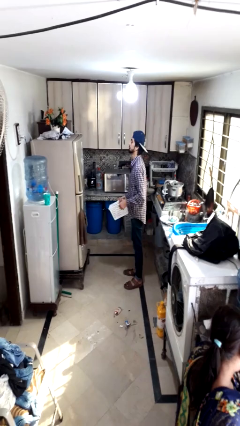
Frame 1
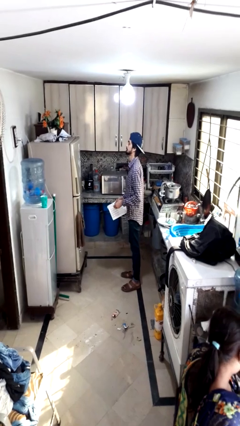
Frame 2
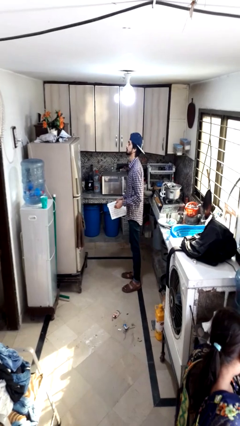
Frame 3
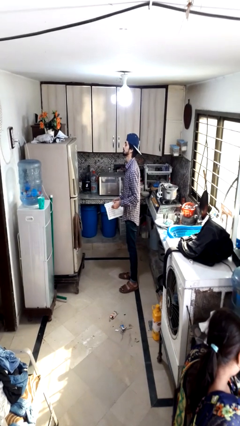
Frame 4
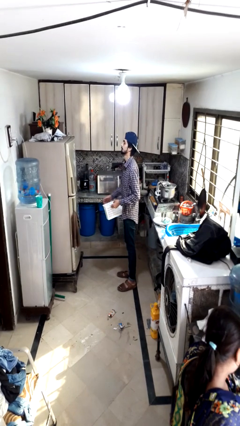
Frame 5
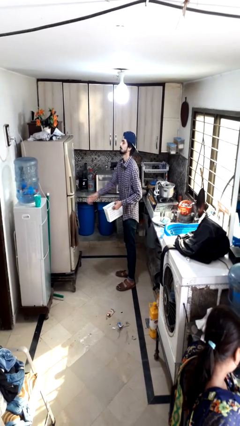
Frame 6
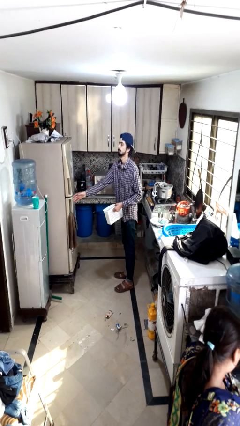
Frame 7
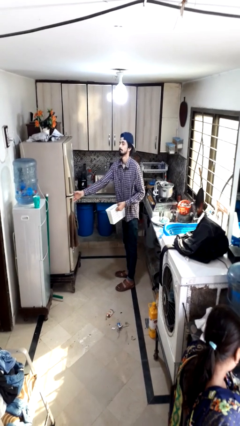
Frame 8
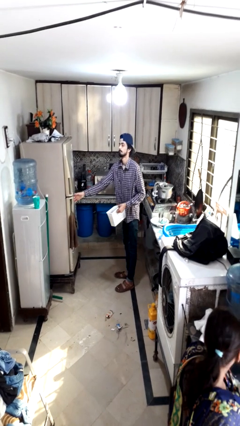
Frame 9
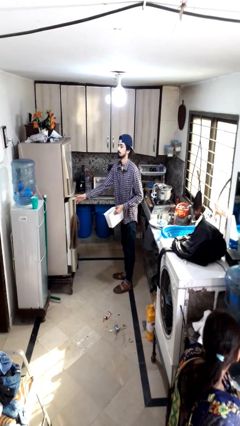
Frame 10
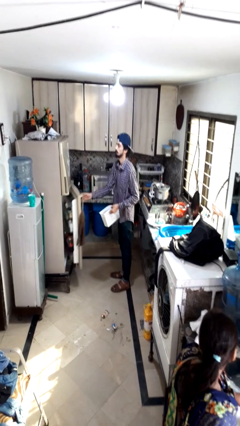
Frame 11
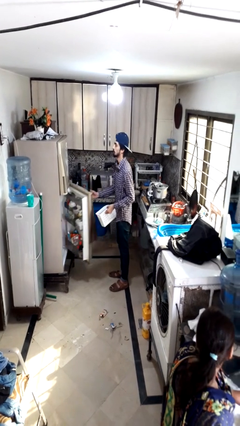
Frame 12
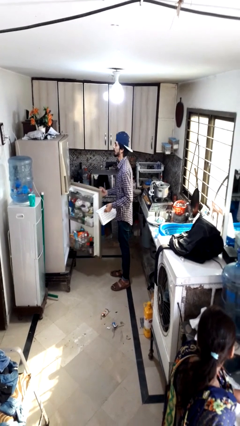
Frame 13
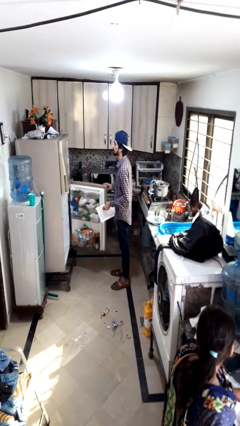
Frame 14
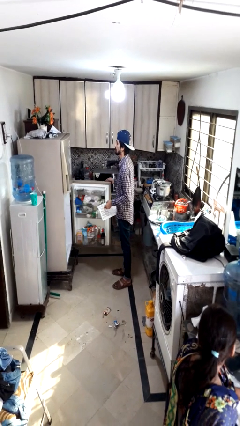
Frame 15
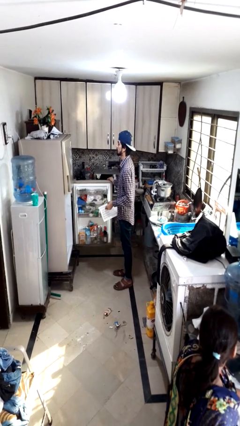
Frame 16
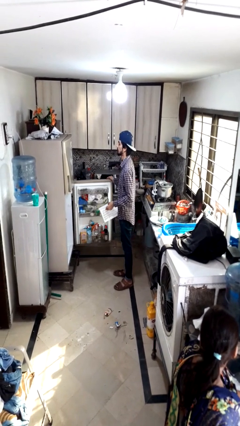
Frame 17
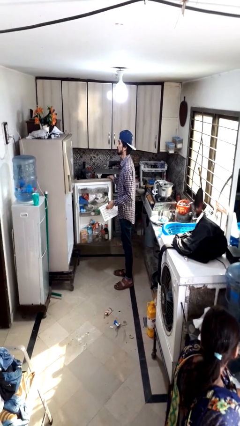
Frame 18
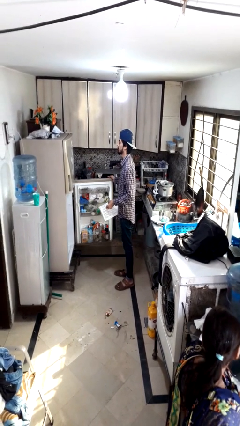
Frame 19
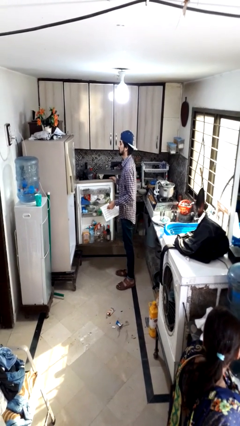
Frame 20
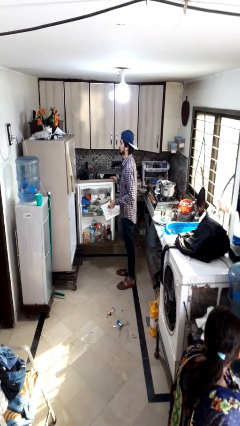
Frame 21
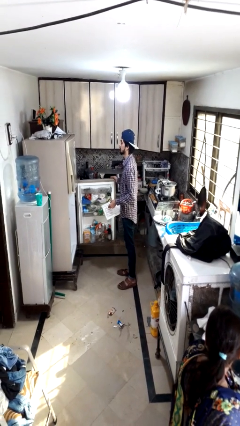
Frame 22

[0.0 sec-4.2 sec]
person opens refrigerator

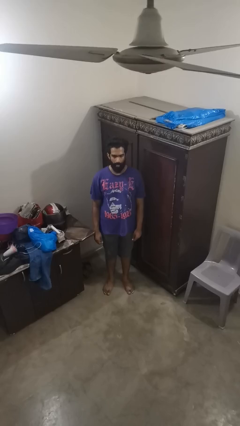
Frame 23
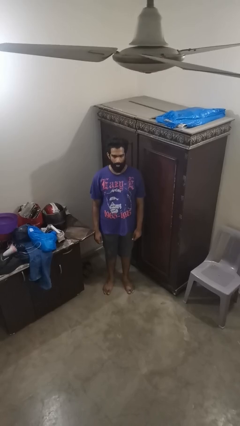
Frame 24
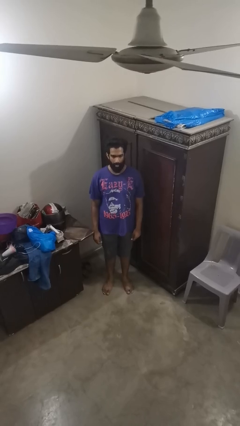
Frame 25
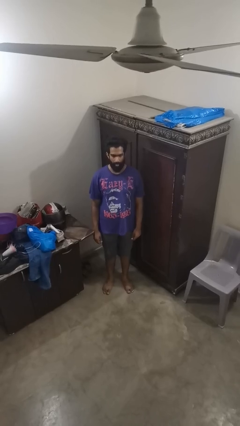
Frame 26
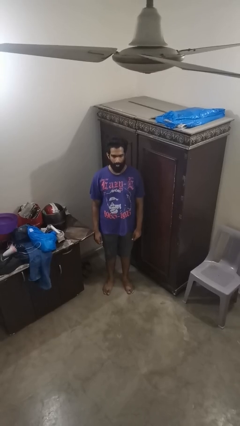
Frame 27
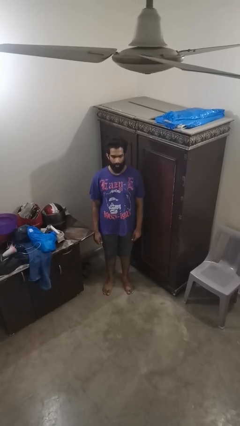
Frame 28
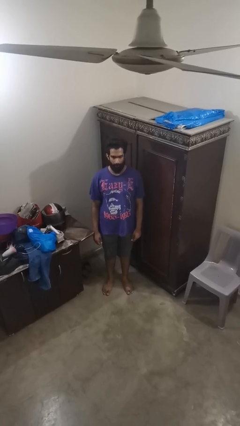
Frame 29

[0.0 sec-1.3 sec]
person sticks out tongue

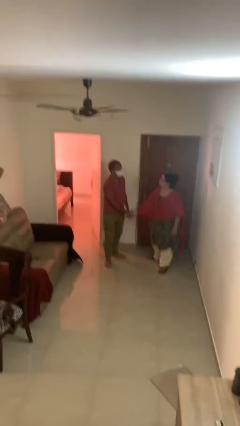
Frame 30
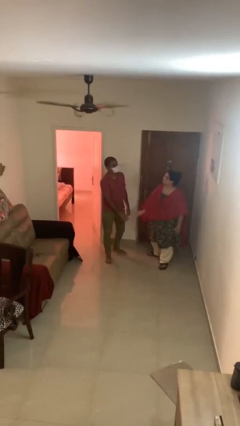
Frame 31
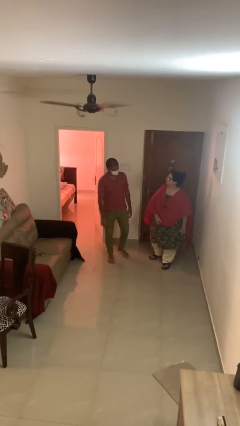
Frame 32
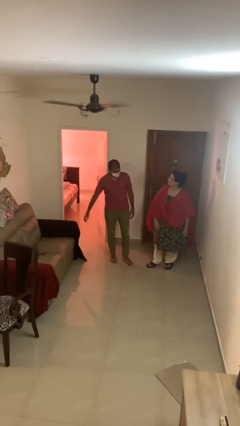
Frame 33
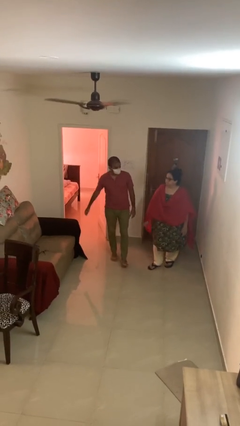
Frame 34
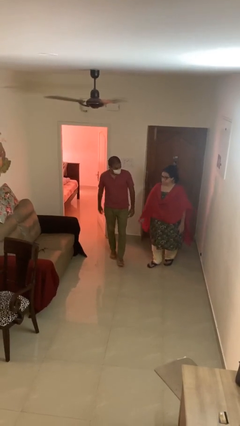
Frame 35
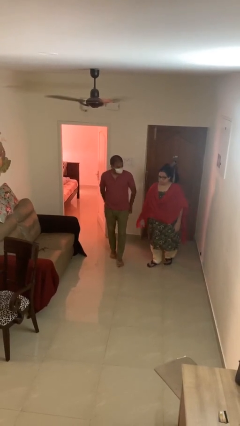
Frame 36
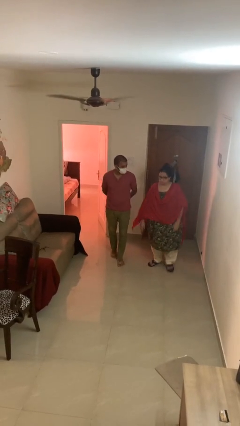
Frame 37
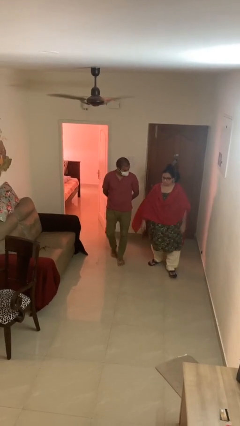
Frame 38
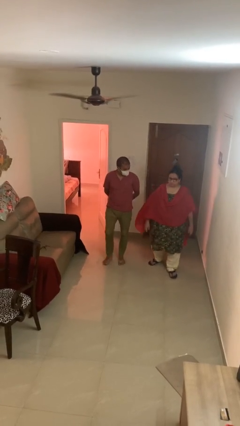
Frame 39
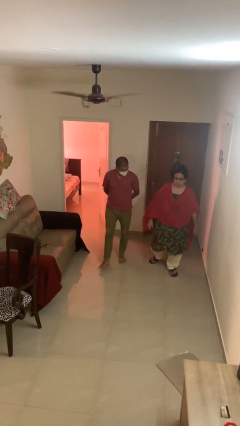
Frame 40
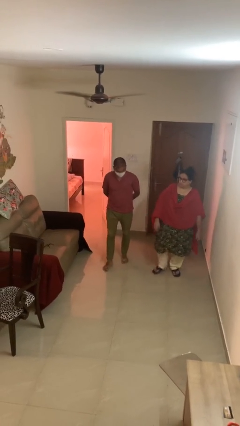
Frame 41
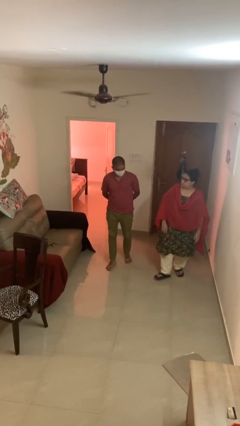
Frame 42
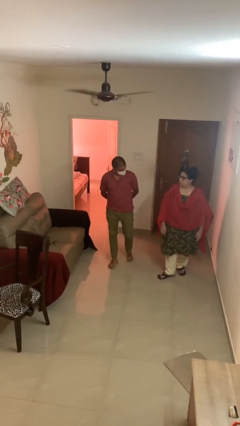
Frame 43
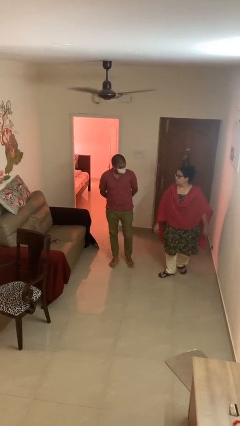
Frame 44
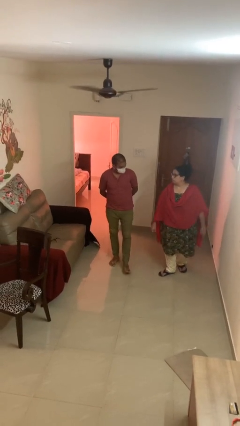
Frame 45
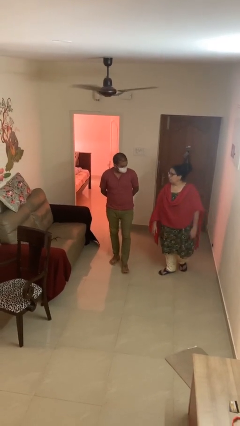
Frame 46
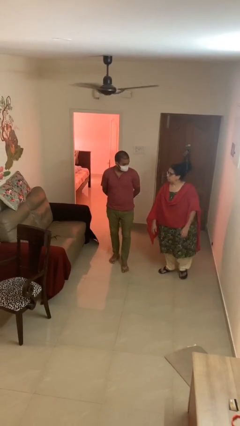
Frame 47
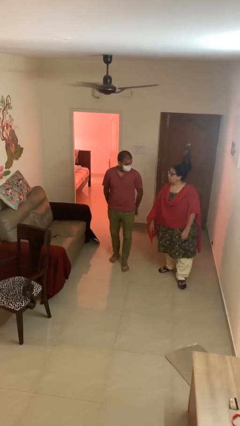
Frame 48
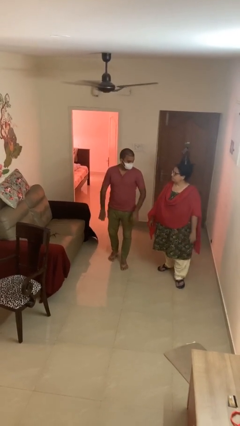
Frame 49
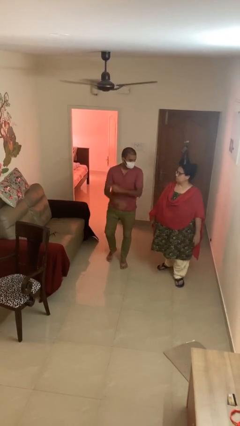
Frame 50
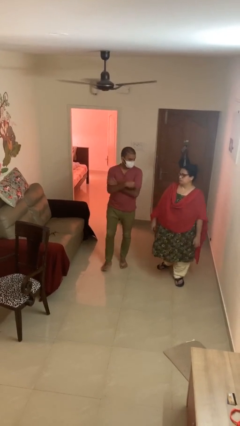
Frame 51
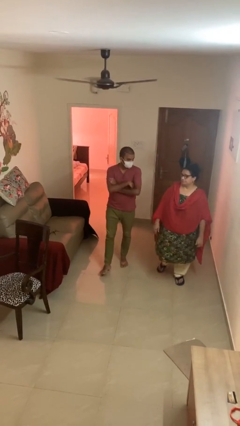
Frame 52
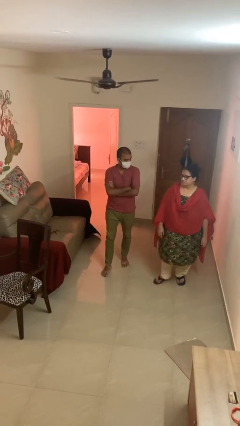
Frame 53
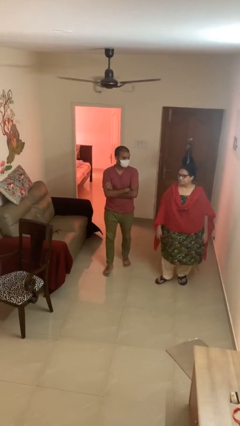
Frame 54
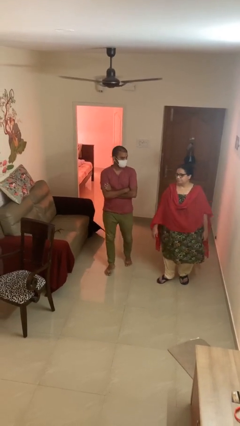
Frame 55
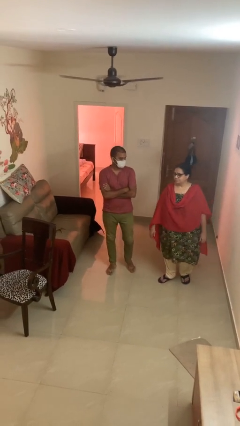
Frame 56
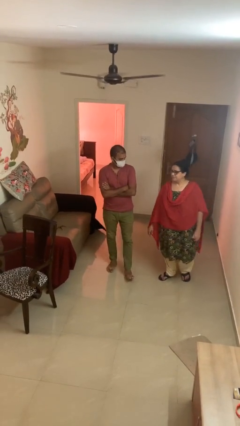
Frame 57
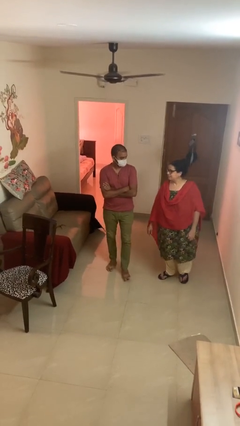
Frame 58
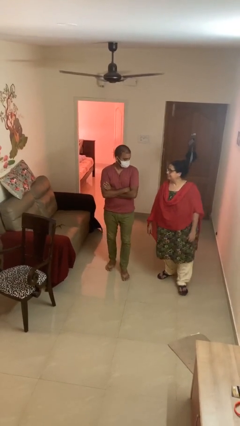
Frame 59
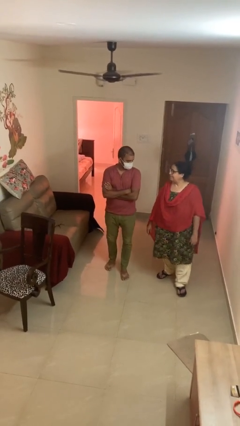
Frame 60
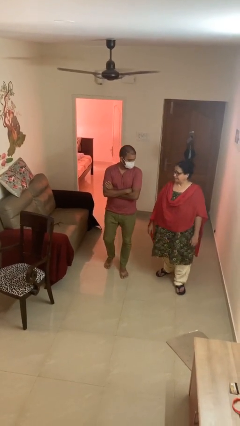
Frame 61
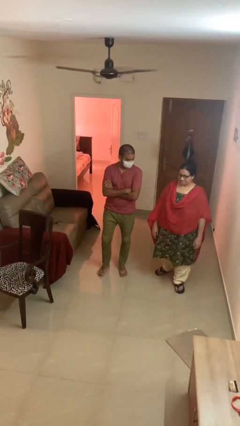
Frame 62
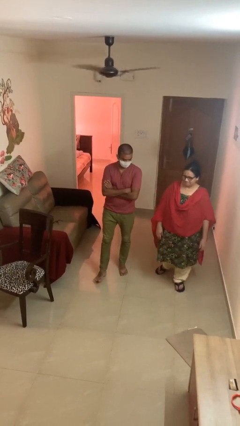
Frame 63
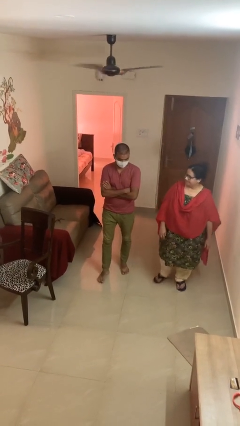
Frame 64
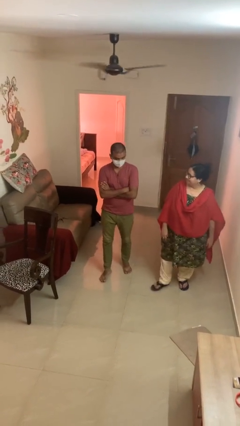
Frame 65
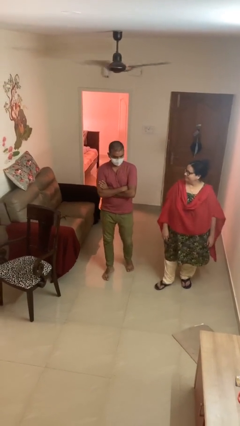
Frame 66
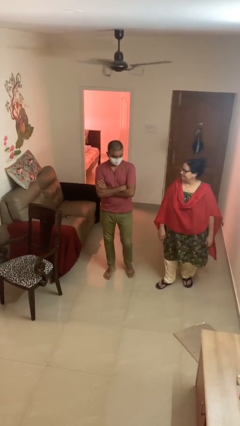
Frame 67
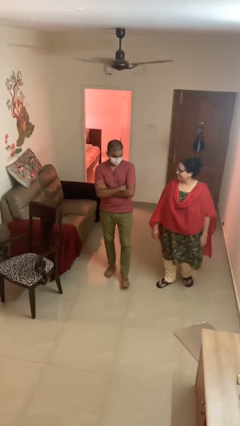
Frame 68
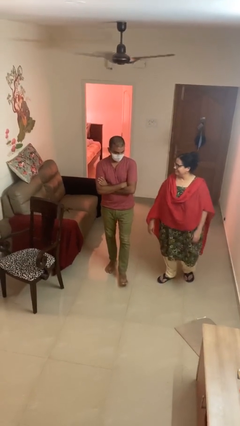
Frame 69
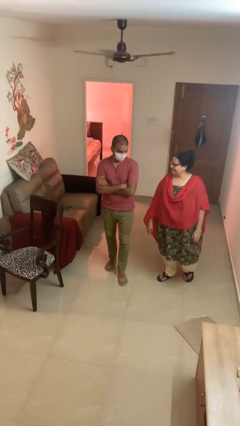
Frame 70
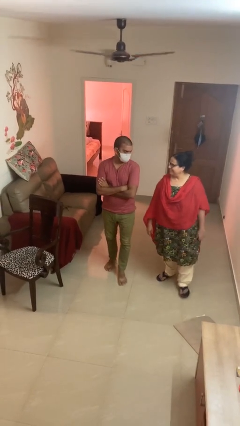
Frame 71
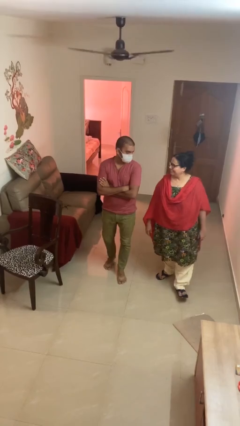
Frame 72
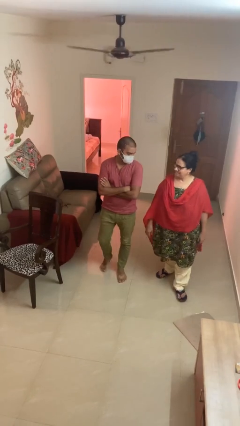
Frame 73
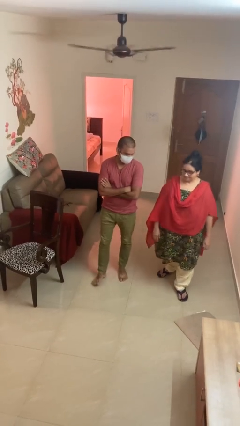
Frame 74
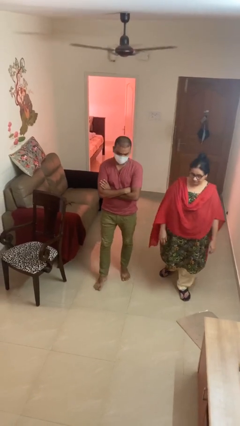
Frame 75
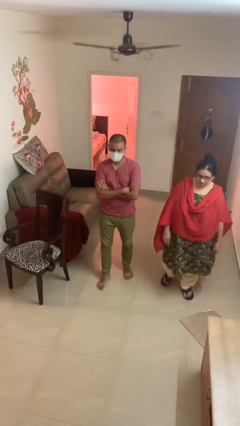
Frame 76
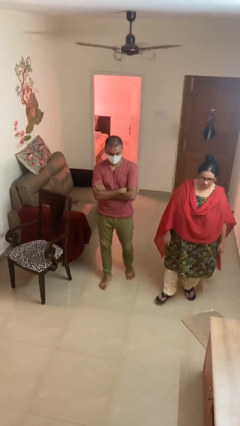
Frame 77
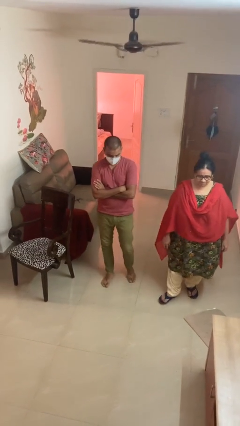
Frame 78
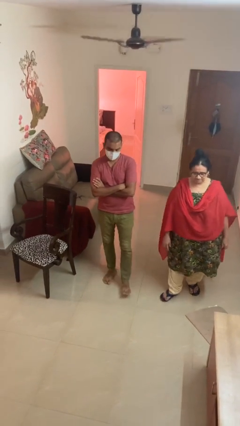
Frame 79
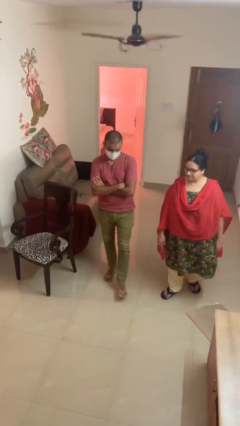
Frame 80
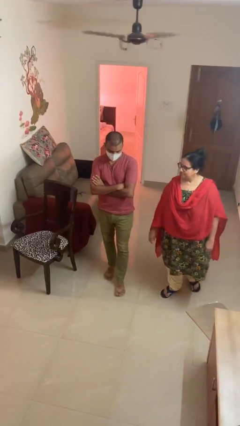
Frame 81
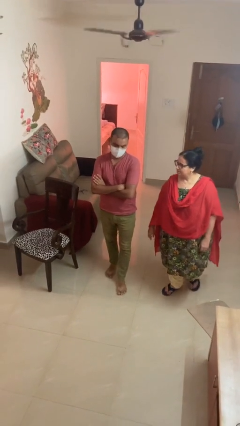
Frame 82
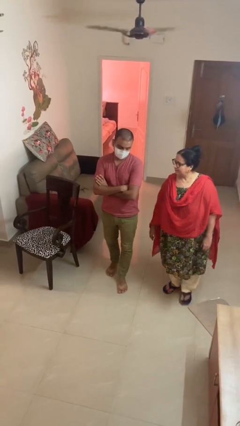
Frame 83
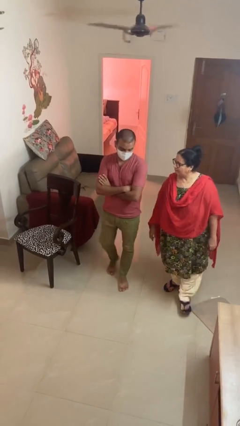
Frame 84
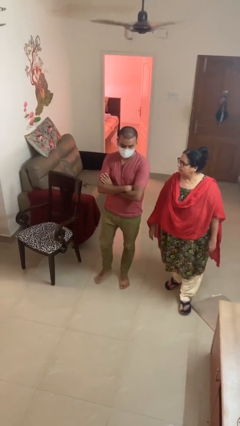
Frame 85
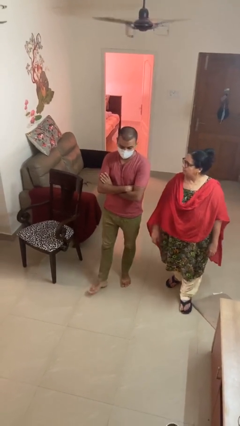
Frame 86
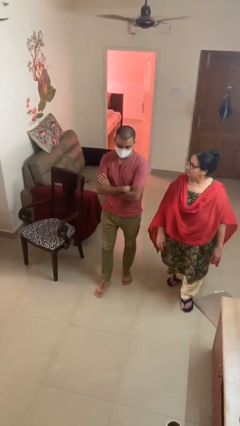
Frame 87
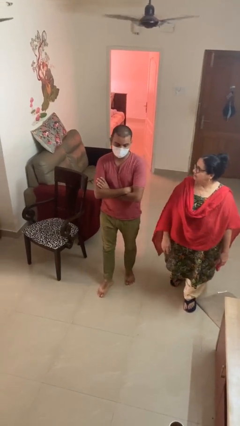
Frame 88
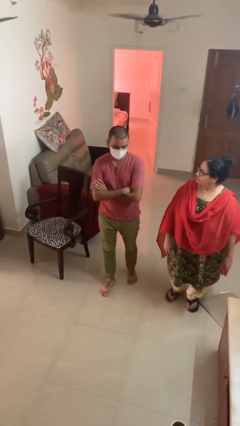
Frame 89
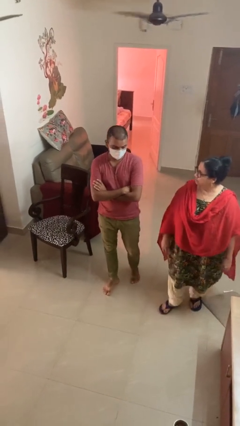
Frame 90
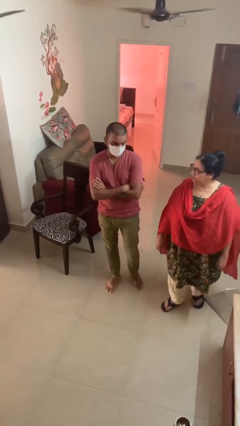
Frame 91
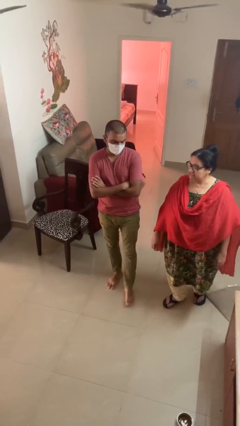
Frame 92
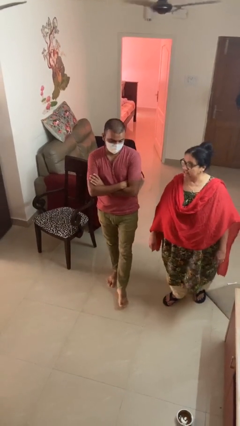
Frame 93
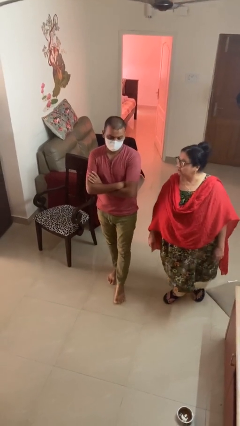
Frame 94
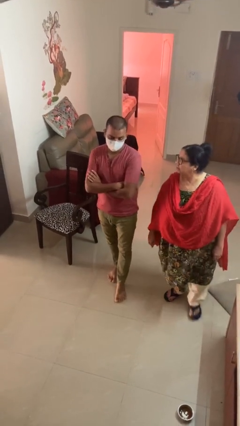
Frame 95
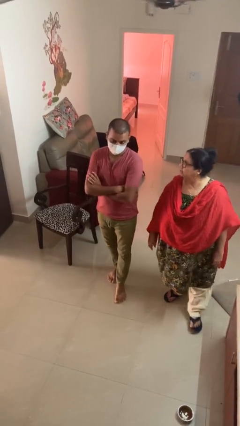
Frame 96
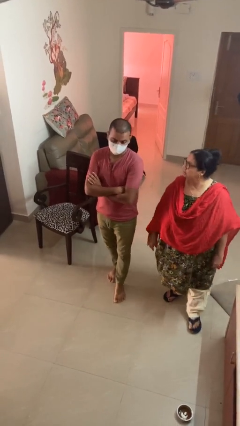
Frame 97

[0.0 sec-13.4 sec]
person talks to person
